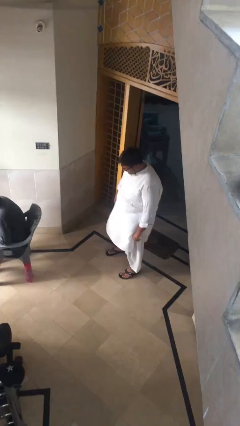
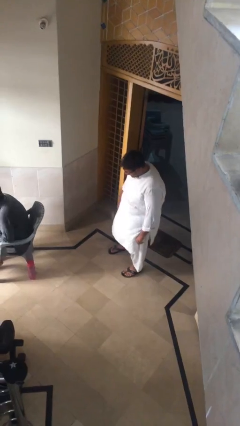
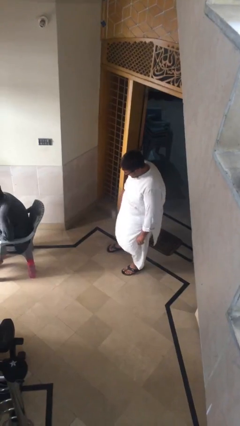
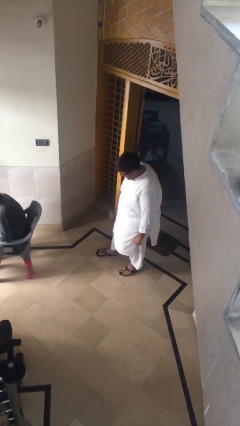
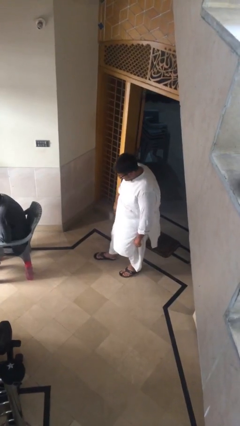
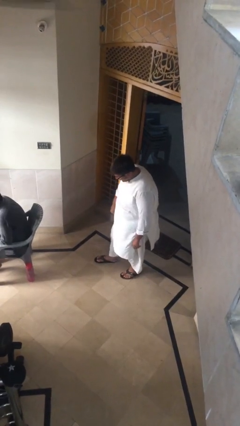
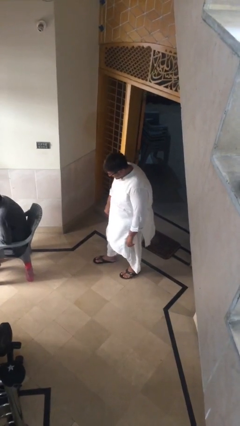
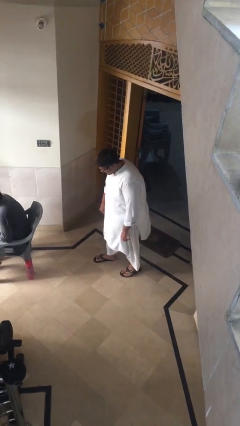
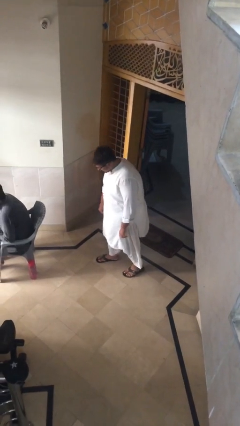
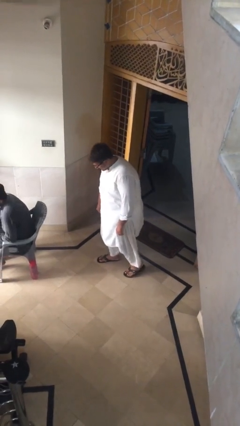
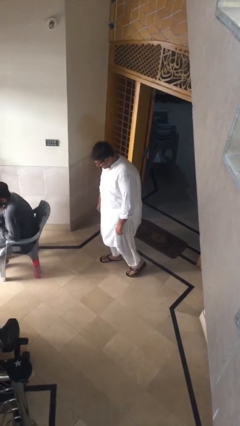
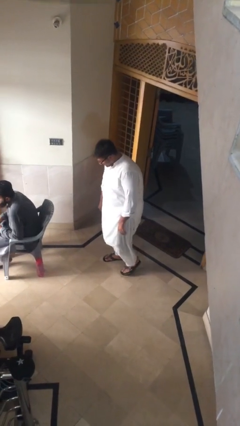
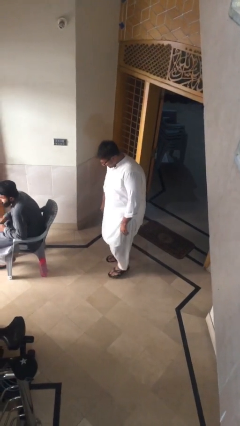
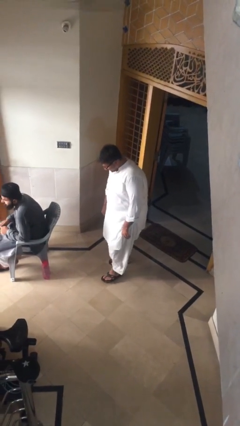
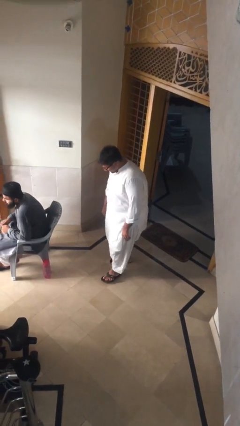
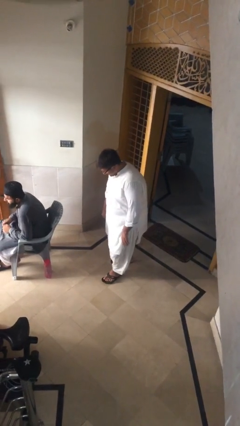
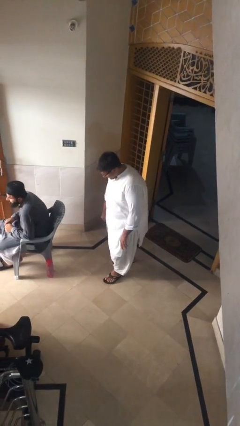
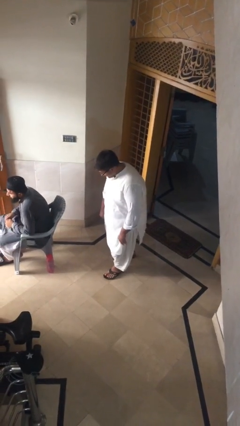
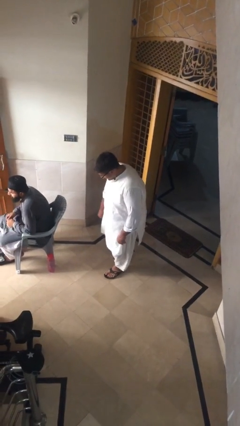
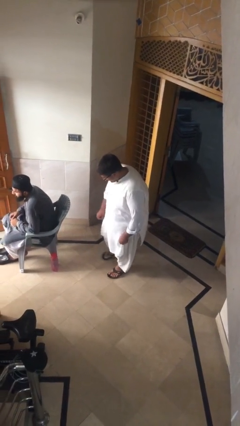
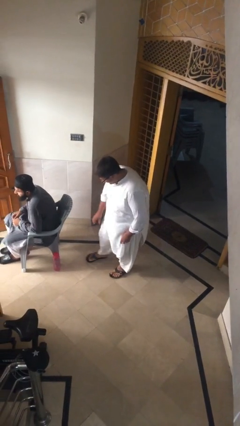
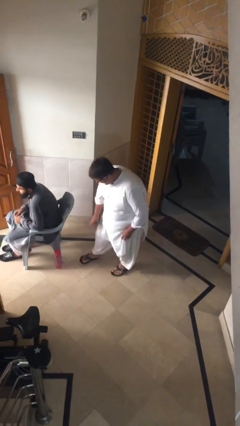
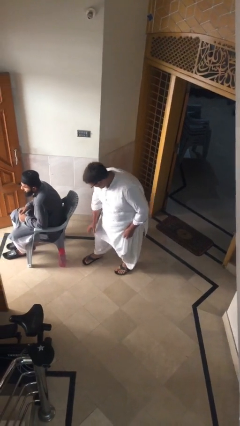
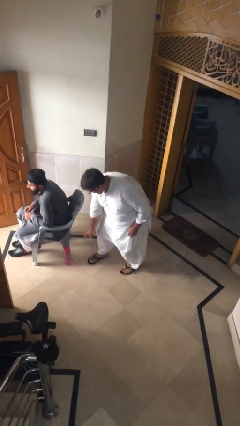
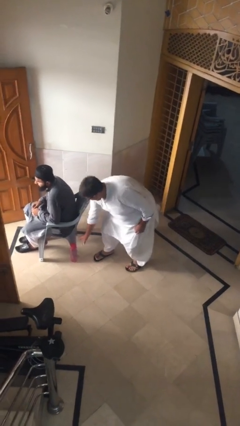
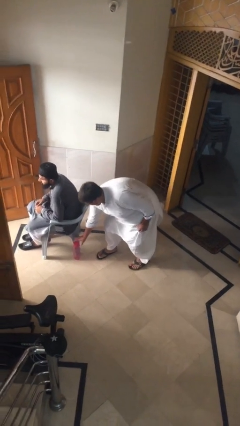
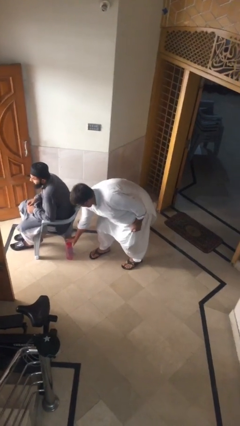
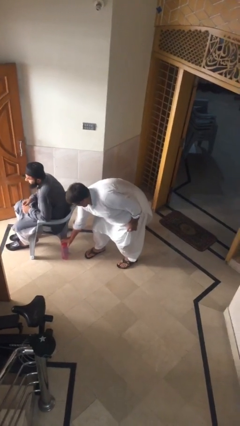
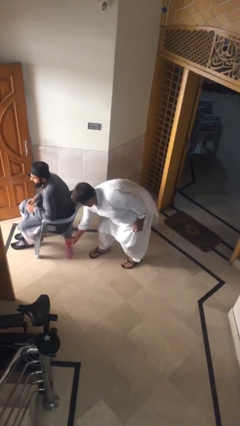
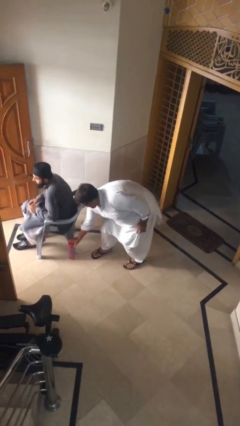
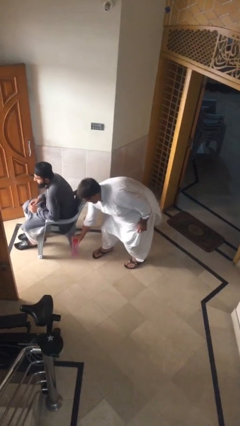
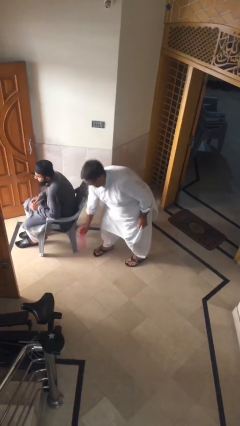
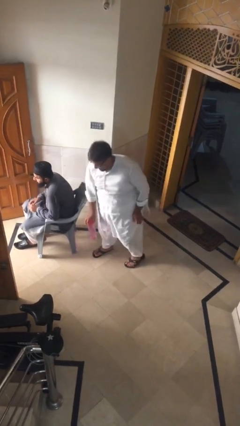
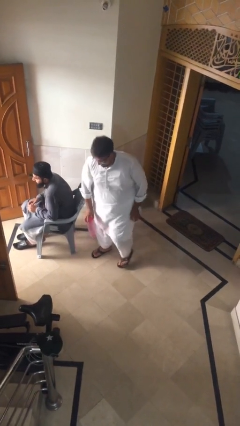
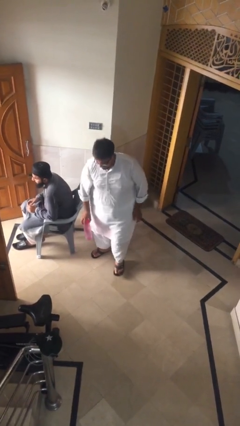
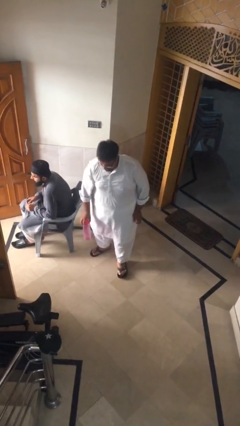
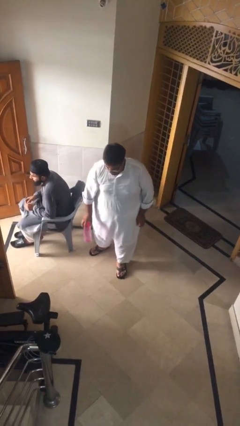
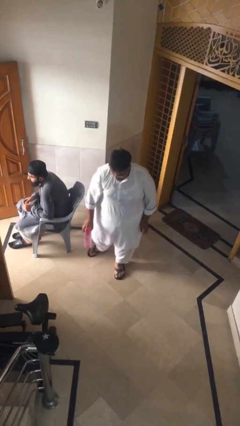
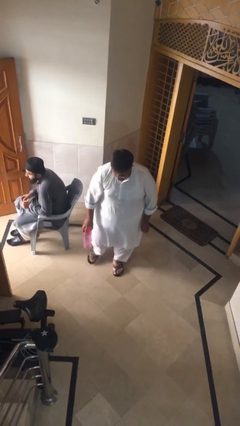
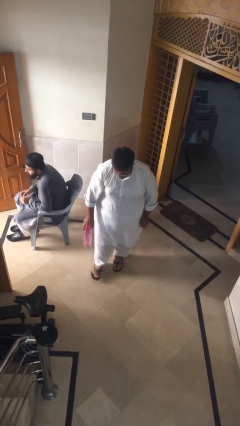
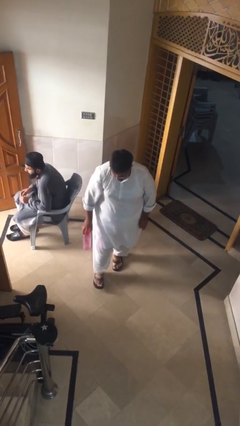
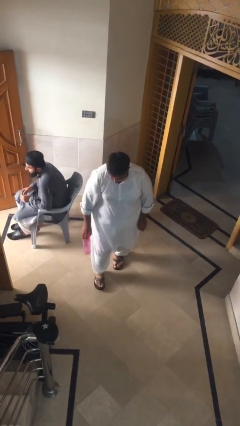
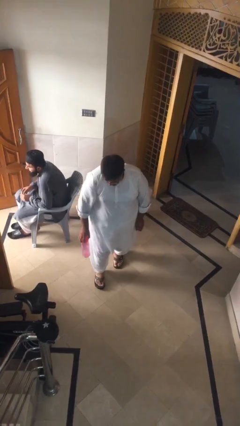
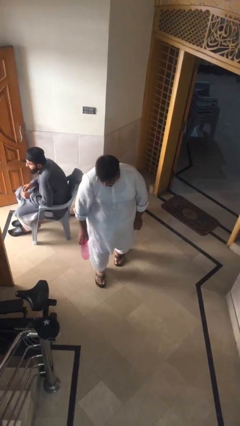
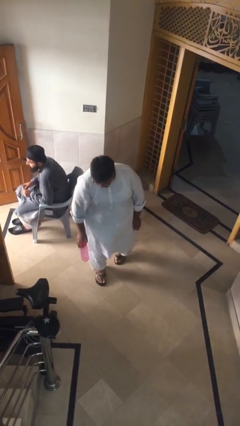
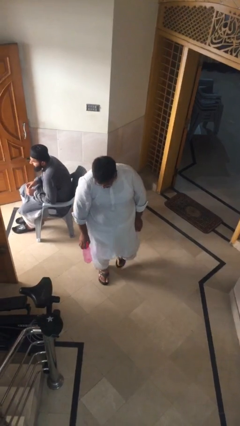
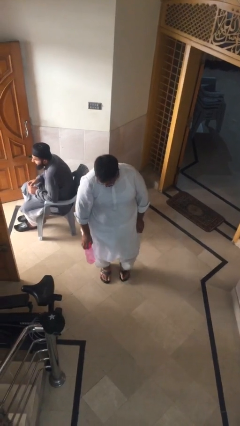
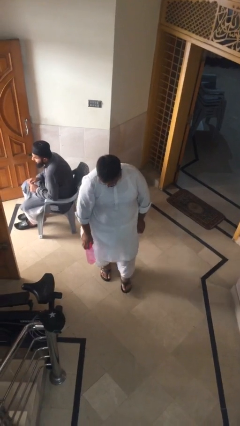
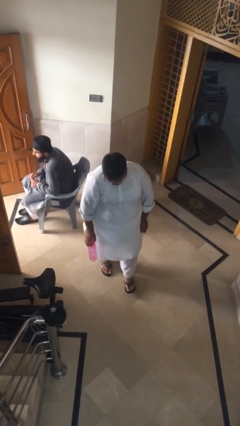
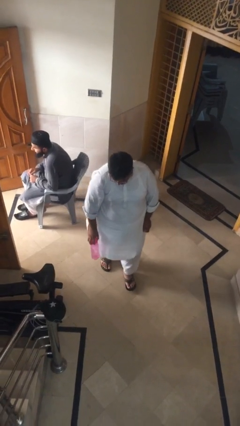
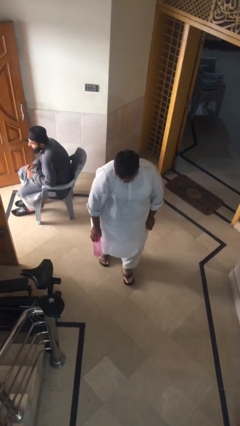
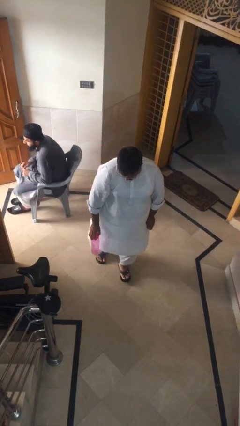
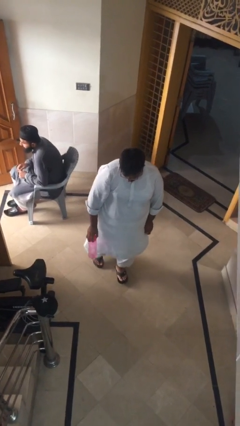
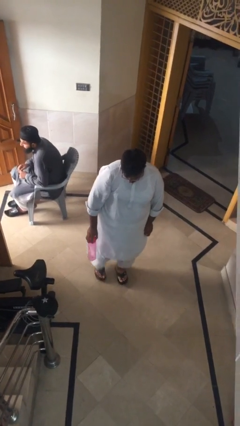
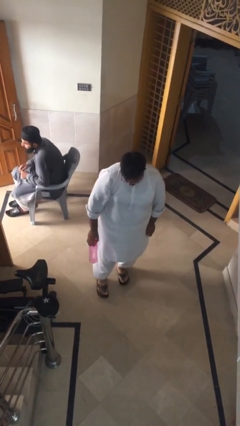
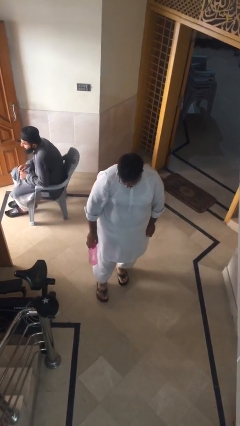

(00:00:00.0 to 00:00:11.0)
person steals object from person

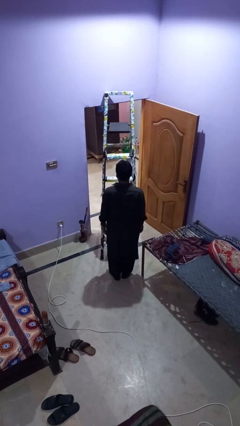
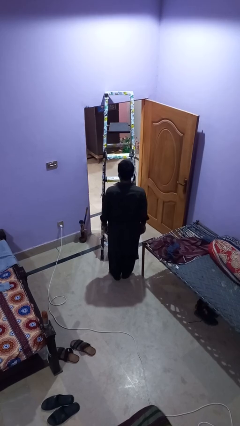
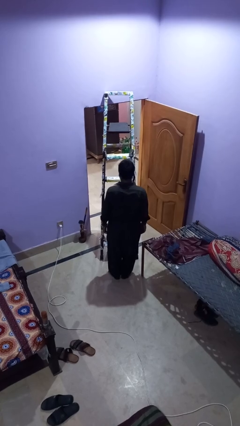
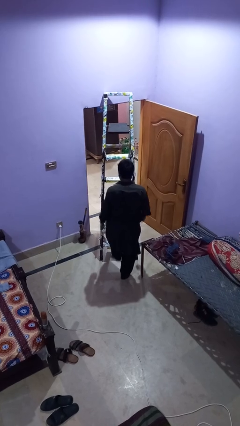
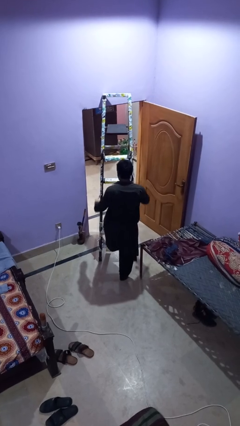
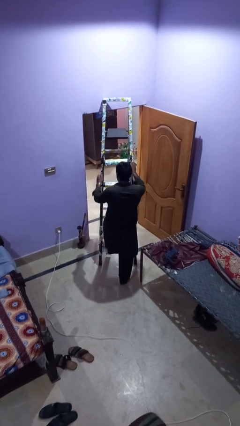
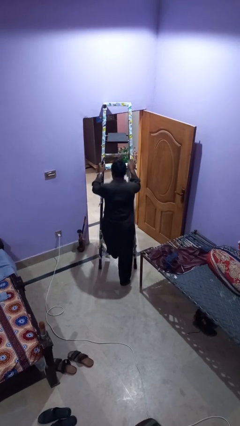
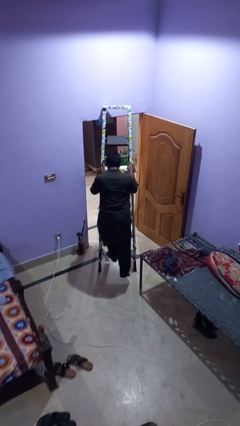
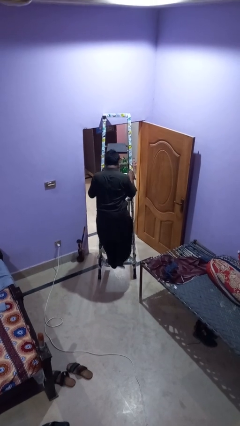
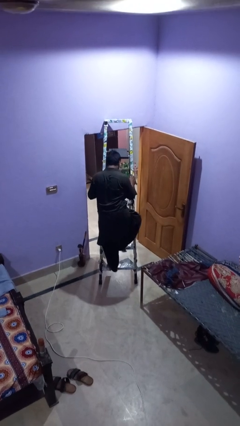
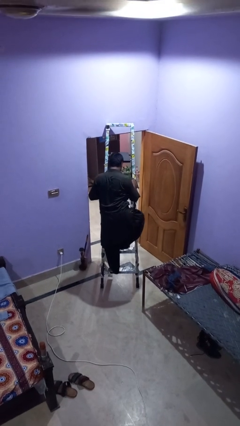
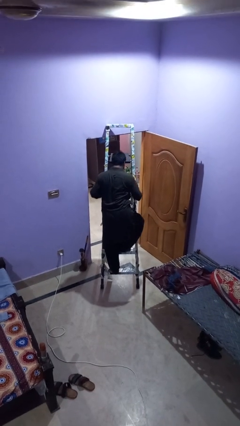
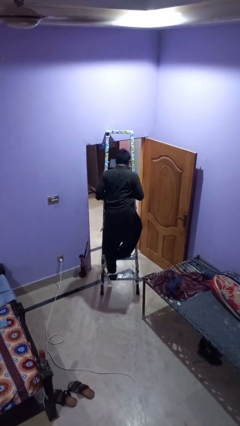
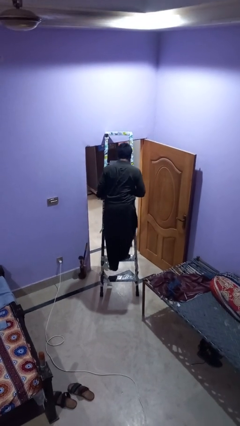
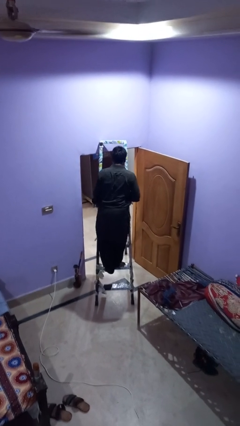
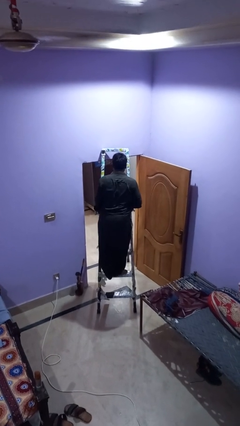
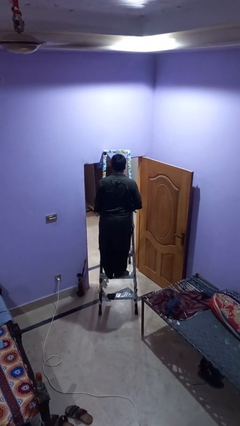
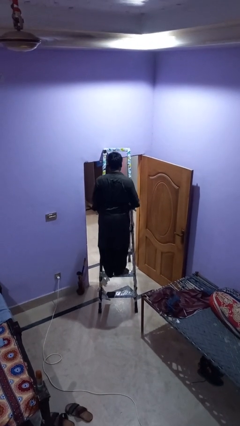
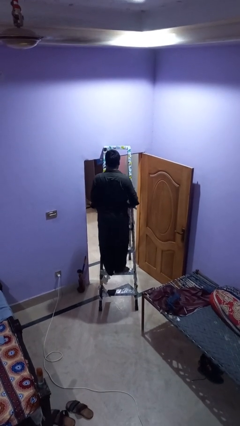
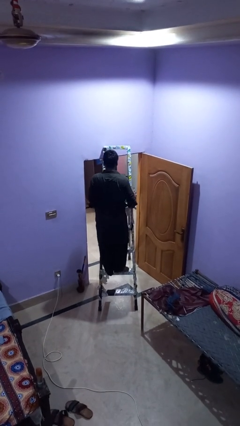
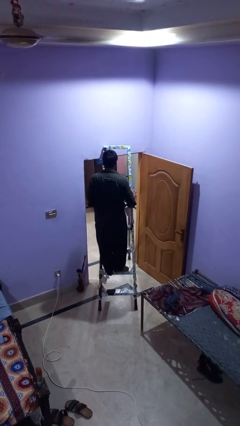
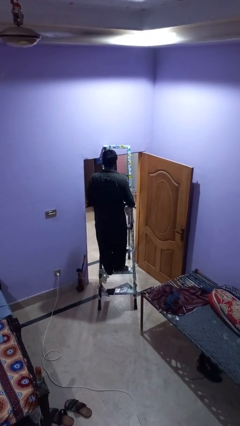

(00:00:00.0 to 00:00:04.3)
person climbs up ladder

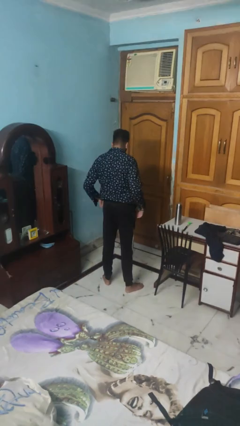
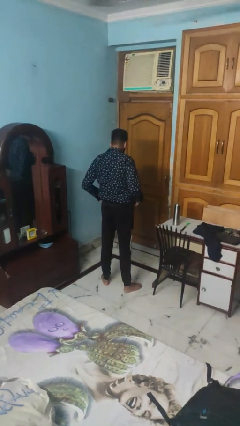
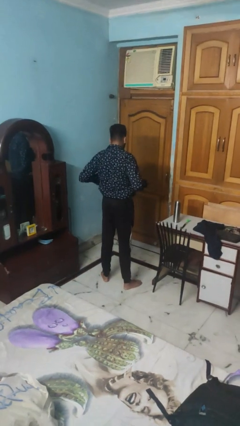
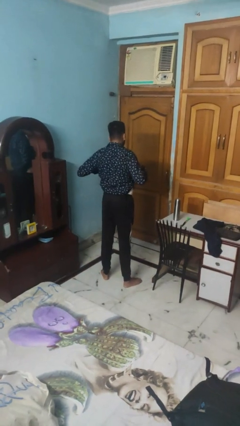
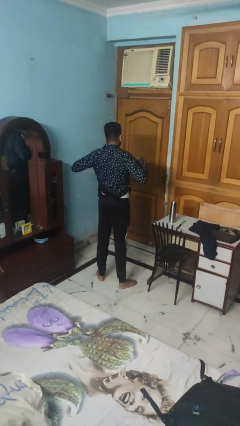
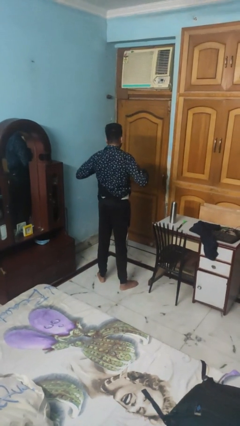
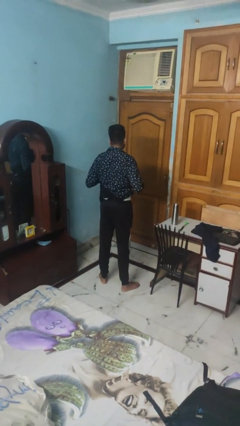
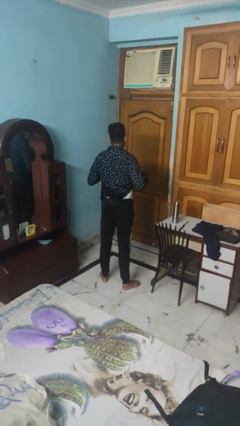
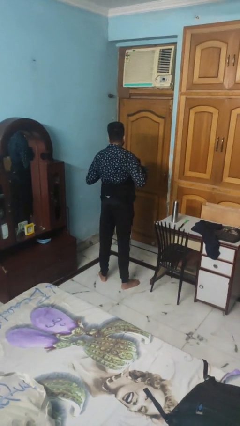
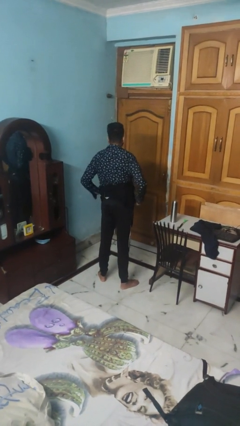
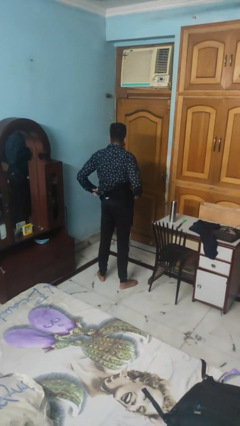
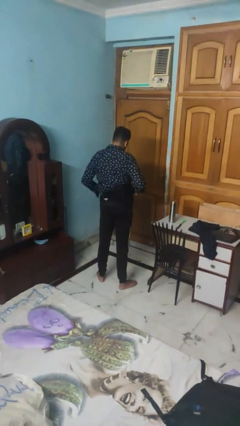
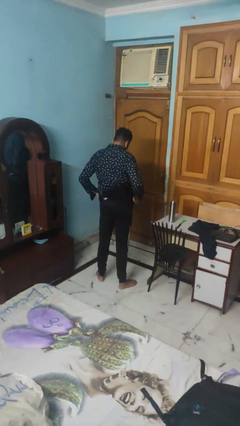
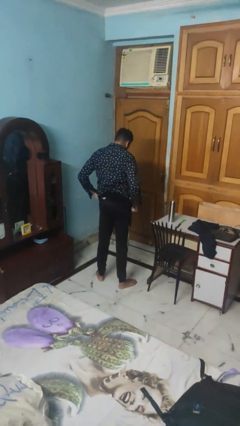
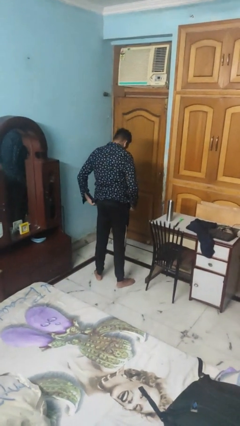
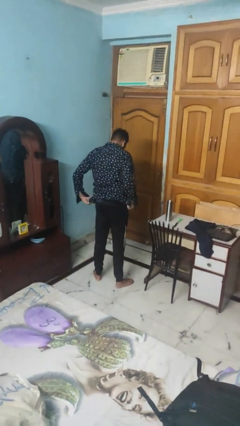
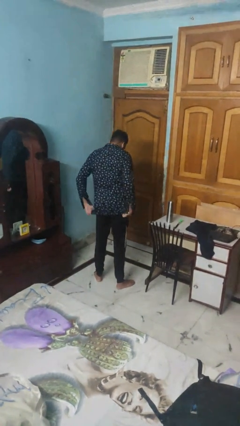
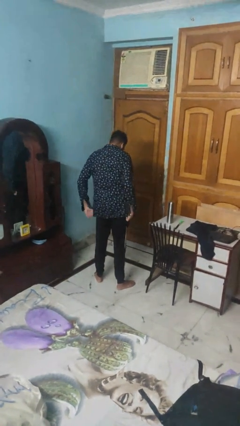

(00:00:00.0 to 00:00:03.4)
person untucks shirt
